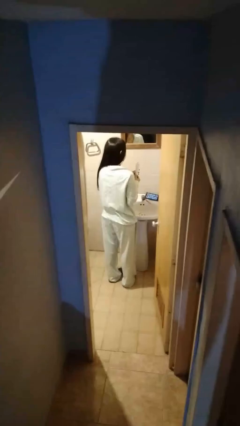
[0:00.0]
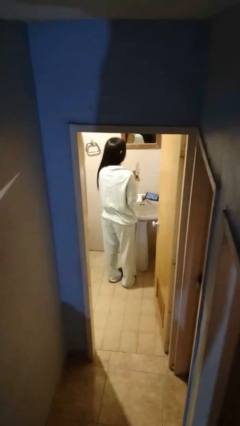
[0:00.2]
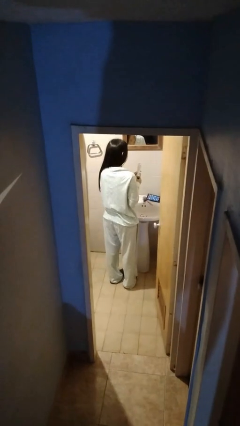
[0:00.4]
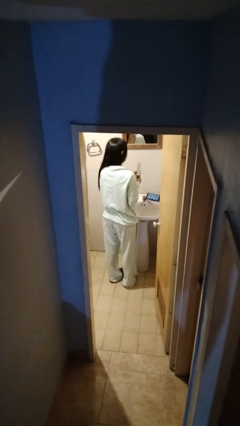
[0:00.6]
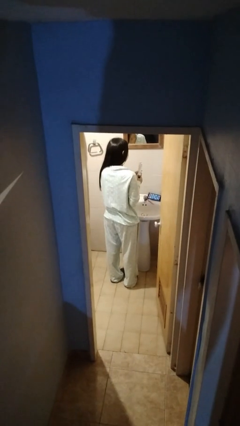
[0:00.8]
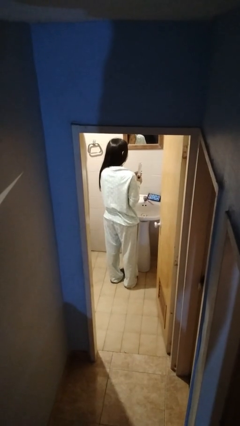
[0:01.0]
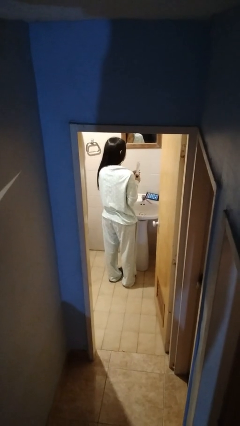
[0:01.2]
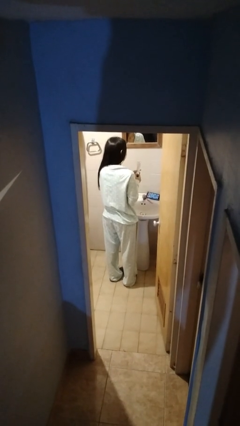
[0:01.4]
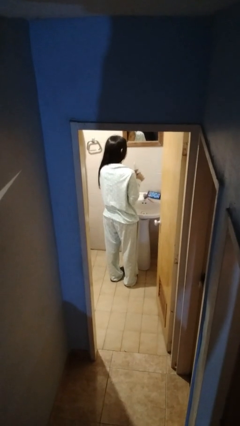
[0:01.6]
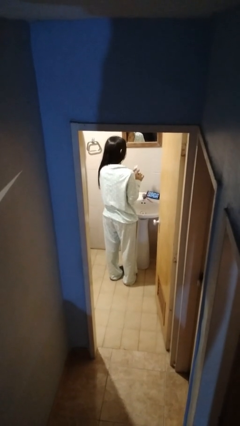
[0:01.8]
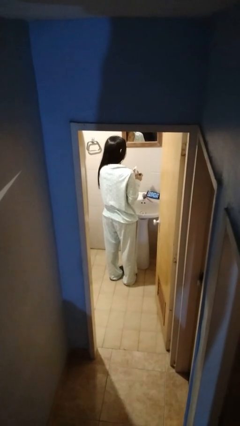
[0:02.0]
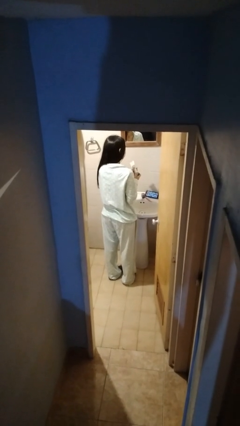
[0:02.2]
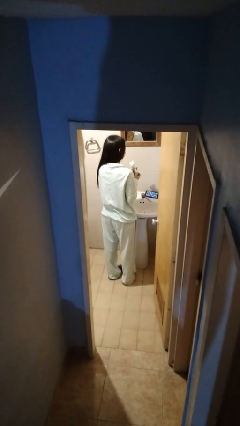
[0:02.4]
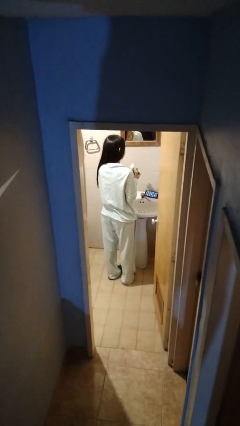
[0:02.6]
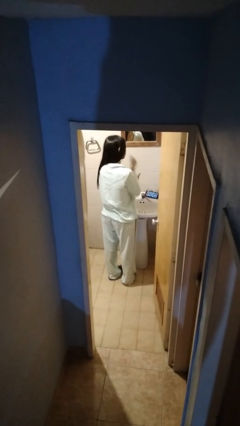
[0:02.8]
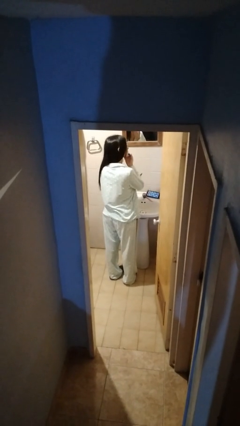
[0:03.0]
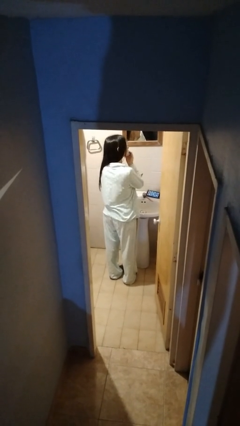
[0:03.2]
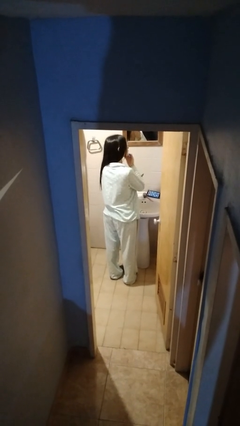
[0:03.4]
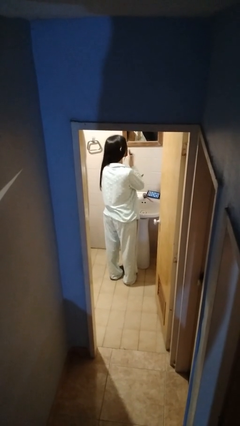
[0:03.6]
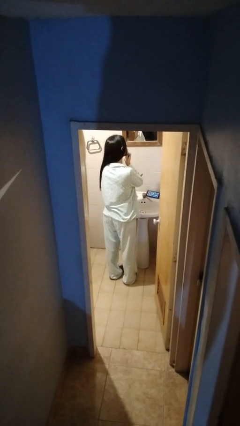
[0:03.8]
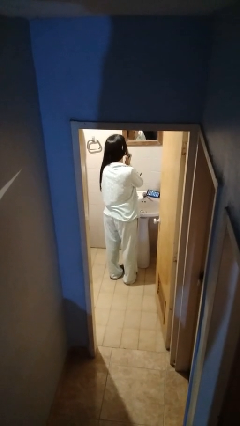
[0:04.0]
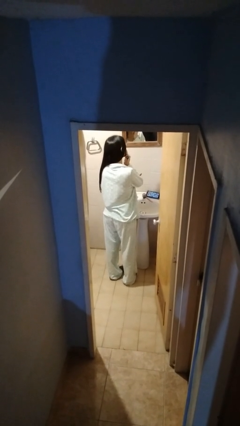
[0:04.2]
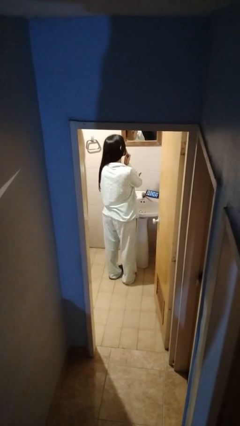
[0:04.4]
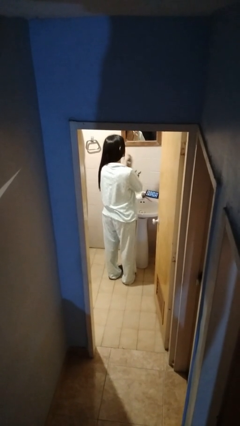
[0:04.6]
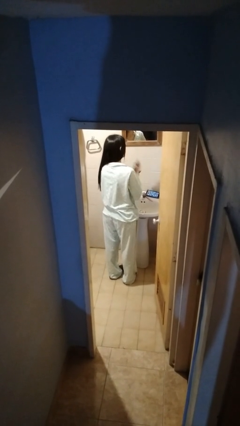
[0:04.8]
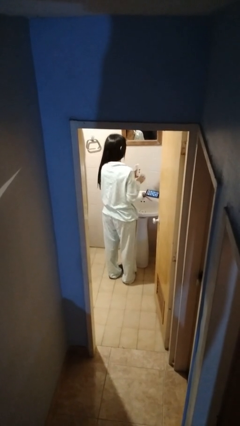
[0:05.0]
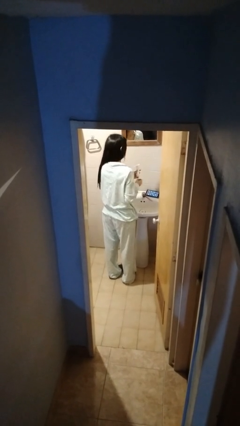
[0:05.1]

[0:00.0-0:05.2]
person applies facial moisturizer

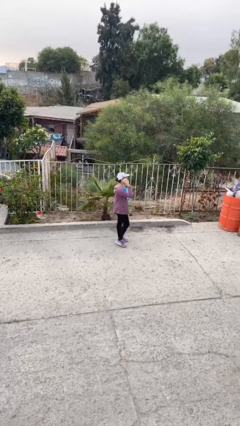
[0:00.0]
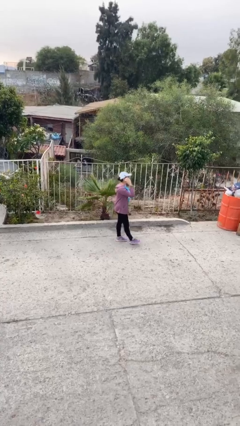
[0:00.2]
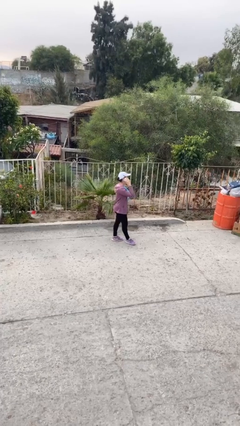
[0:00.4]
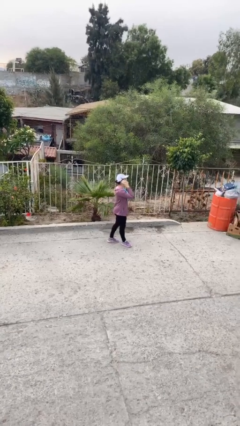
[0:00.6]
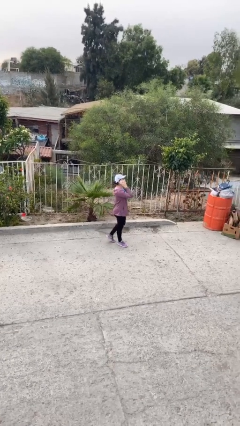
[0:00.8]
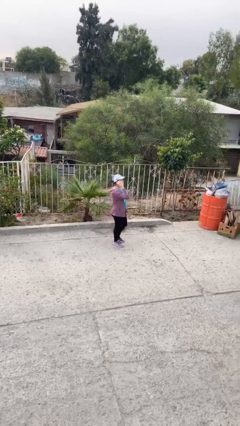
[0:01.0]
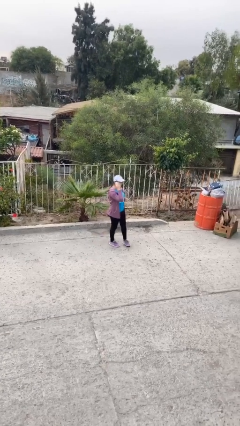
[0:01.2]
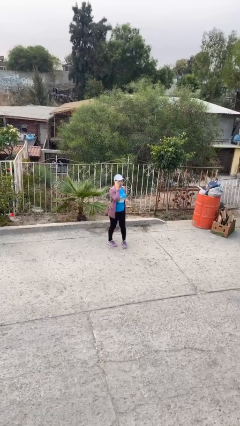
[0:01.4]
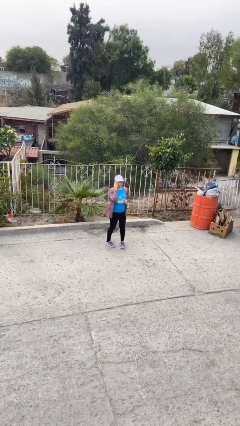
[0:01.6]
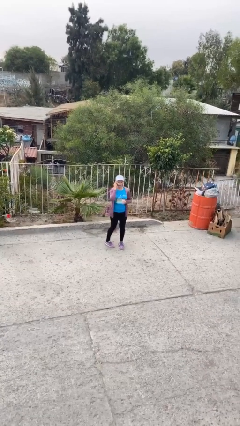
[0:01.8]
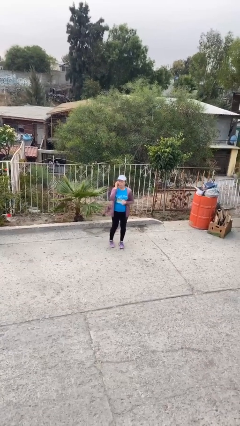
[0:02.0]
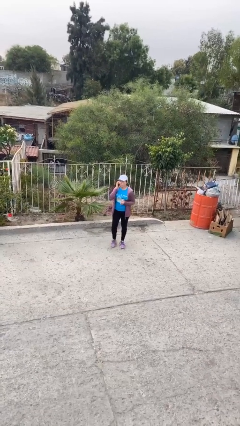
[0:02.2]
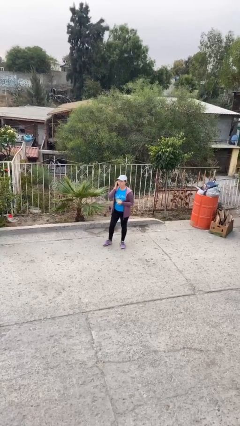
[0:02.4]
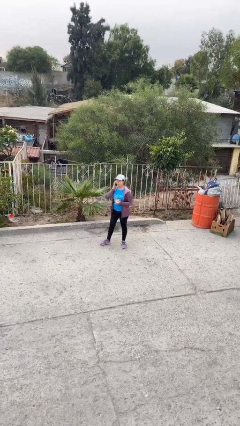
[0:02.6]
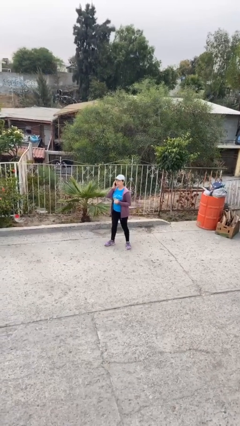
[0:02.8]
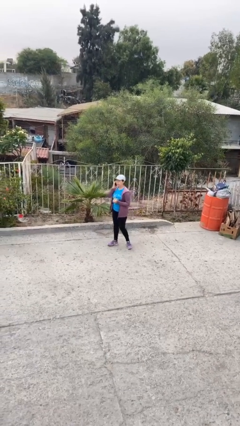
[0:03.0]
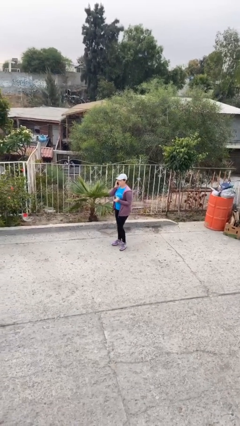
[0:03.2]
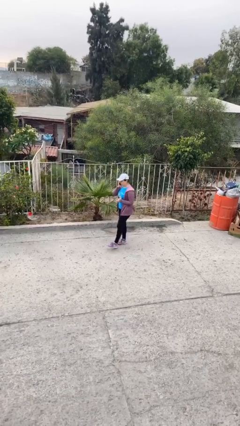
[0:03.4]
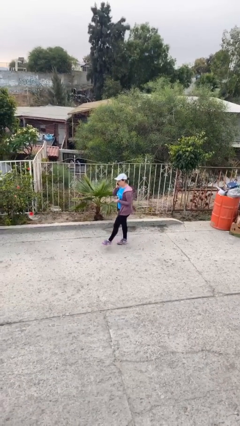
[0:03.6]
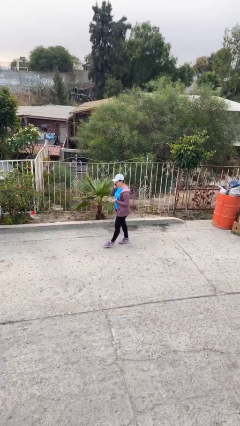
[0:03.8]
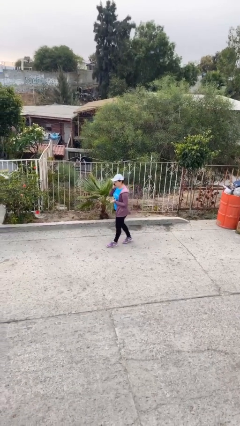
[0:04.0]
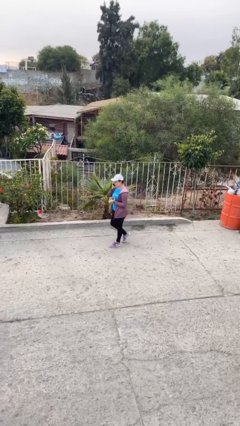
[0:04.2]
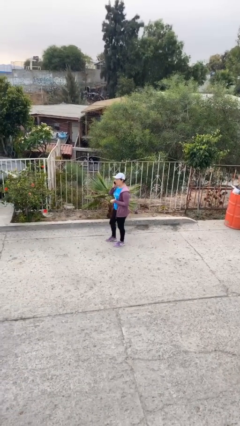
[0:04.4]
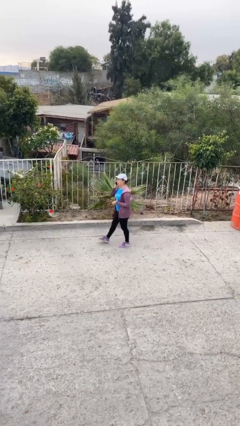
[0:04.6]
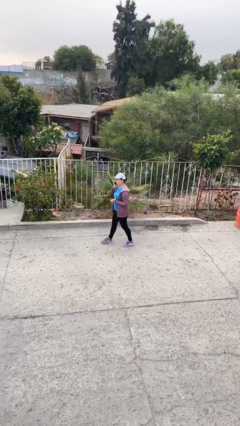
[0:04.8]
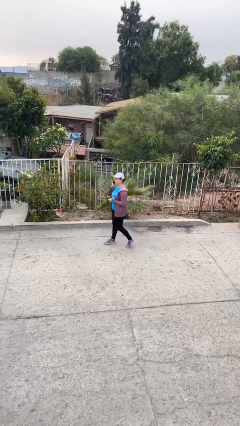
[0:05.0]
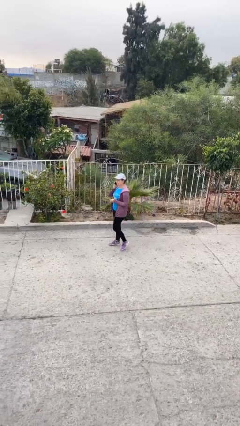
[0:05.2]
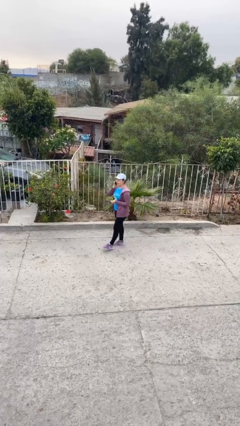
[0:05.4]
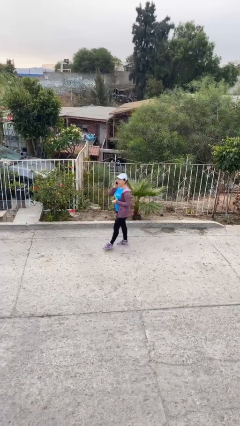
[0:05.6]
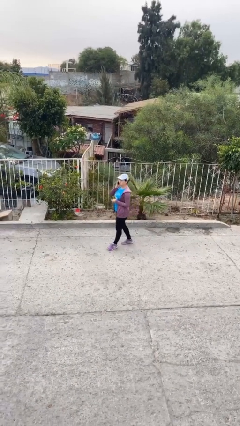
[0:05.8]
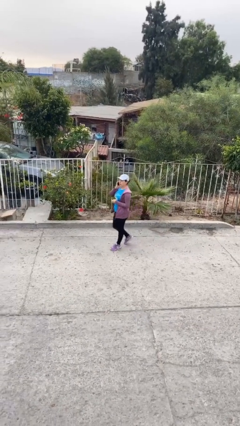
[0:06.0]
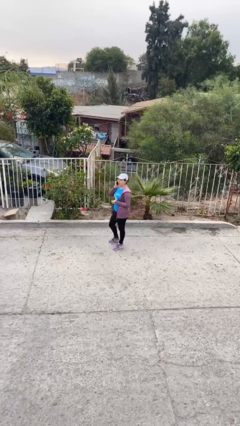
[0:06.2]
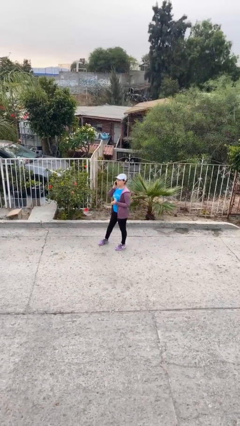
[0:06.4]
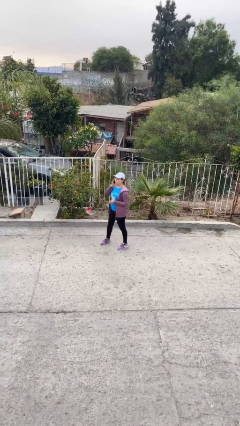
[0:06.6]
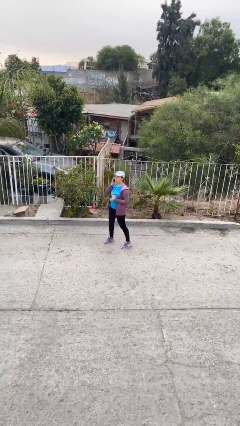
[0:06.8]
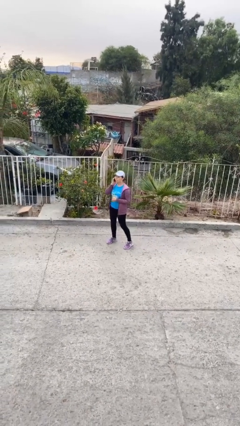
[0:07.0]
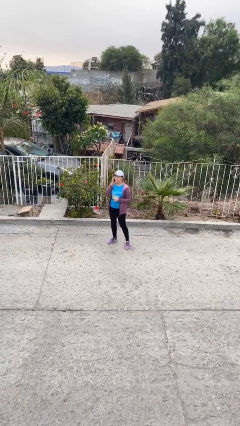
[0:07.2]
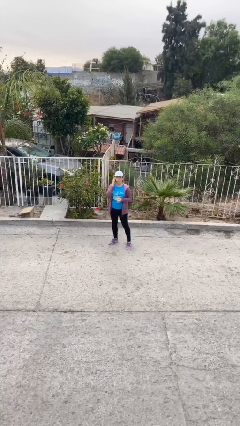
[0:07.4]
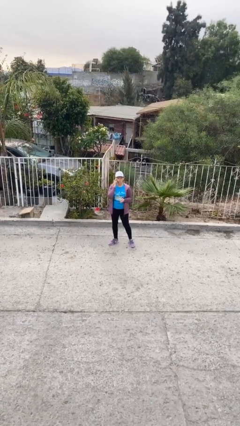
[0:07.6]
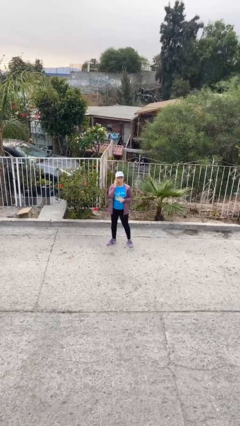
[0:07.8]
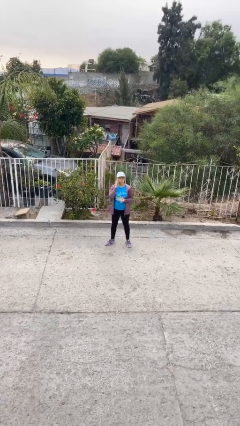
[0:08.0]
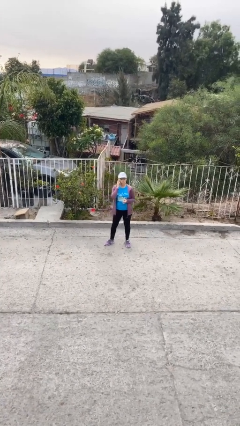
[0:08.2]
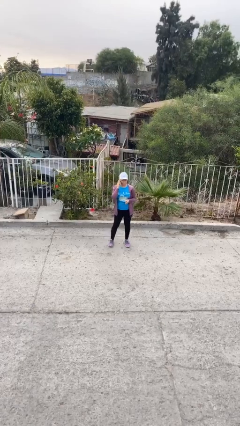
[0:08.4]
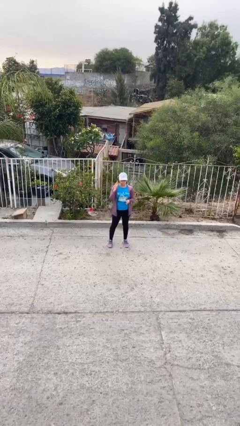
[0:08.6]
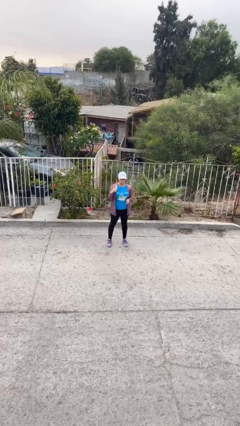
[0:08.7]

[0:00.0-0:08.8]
person talks on phone

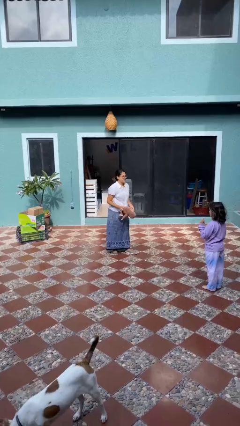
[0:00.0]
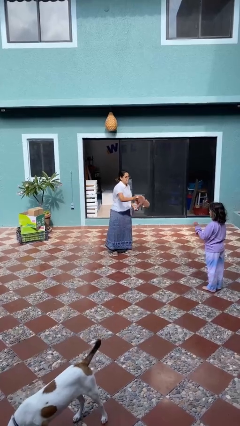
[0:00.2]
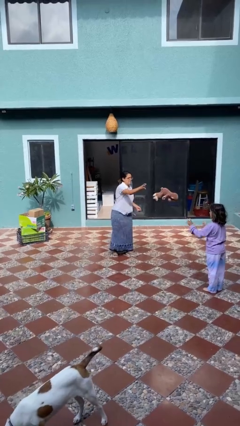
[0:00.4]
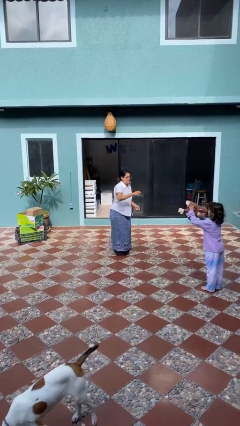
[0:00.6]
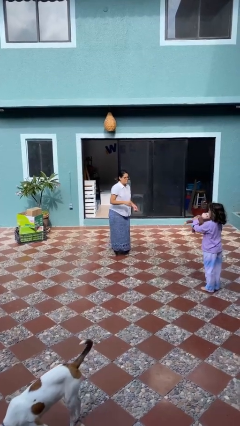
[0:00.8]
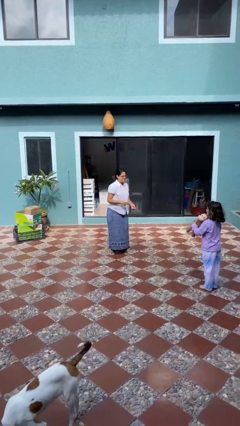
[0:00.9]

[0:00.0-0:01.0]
person throws object to person

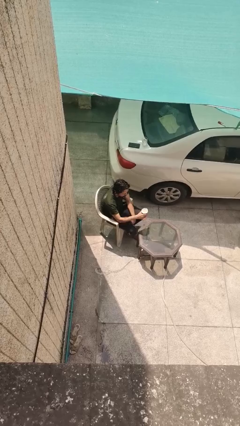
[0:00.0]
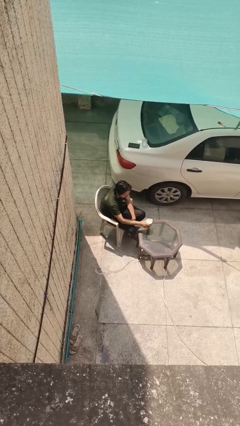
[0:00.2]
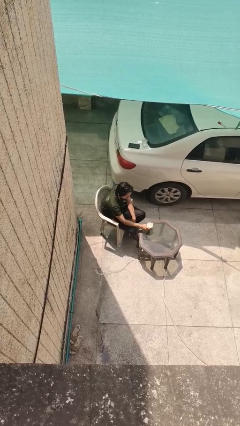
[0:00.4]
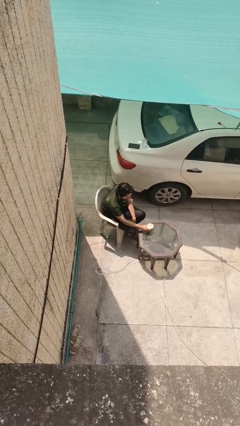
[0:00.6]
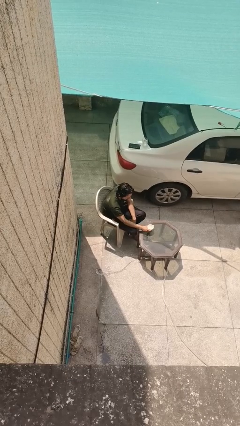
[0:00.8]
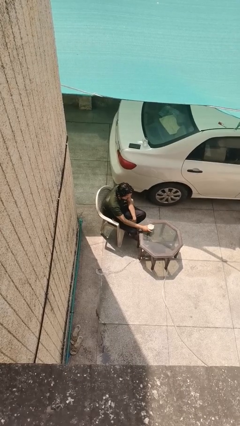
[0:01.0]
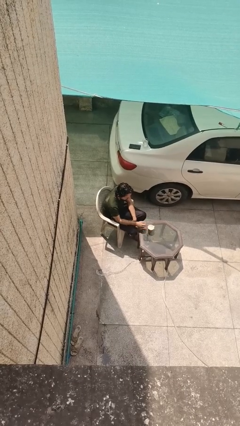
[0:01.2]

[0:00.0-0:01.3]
person puts down object on table

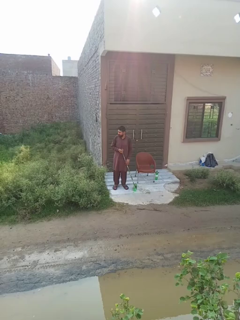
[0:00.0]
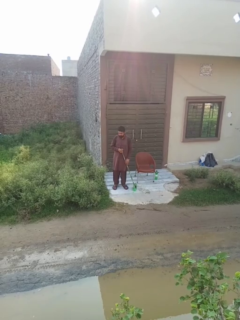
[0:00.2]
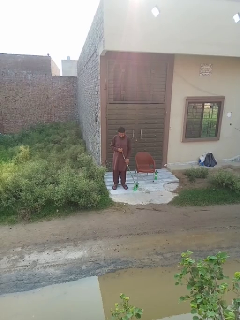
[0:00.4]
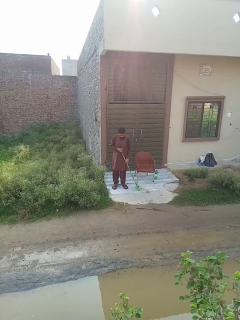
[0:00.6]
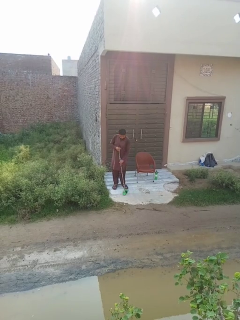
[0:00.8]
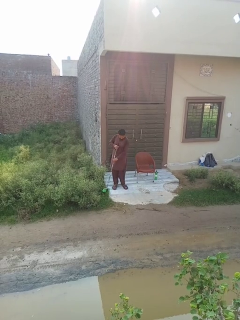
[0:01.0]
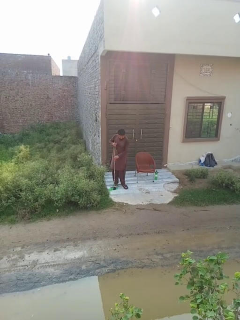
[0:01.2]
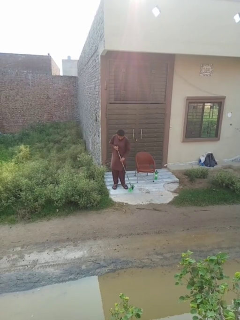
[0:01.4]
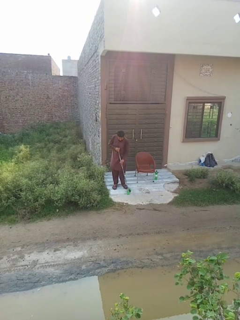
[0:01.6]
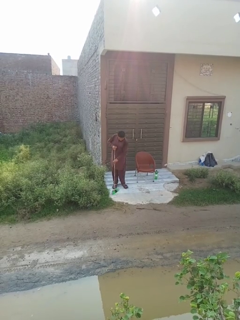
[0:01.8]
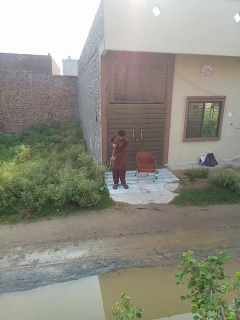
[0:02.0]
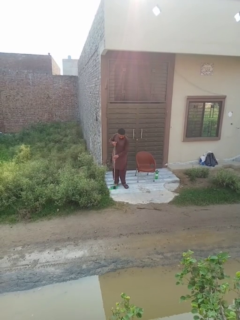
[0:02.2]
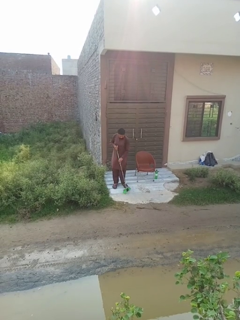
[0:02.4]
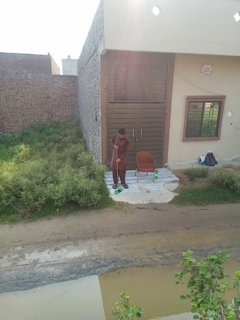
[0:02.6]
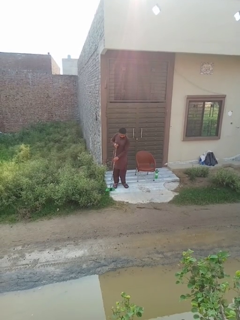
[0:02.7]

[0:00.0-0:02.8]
person sweeps floor
